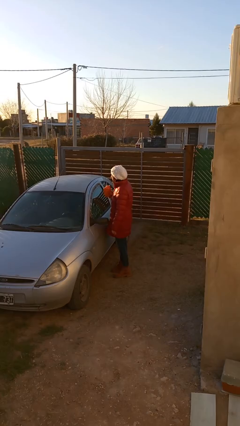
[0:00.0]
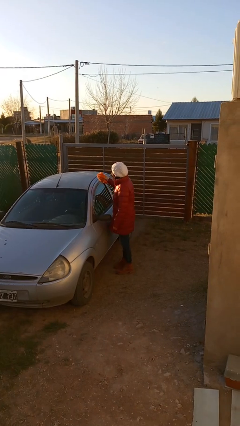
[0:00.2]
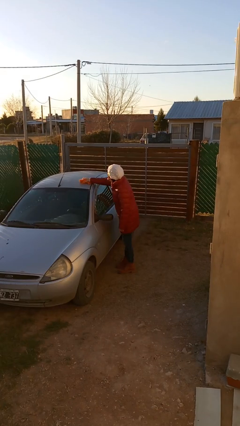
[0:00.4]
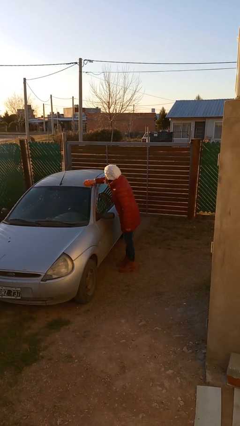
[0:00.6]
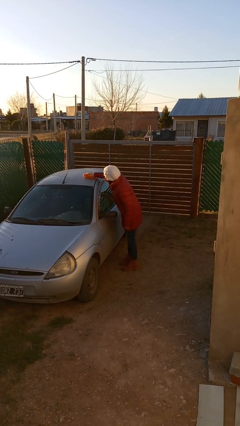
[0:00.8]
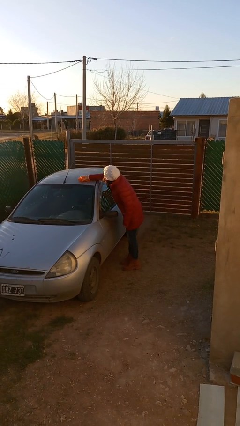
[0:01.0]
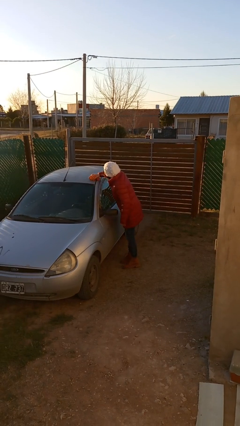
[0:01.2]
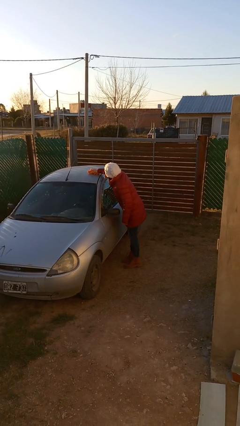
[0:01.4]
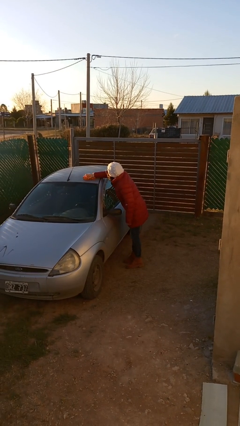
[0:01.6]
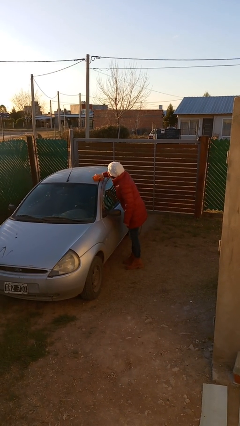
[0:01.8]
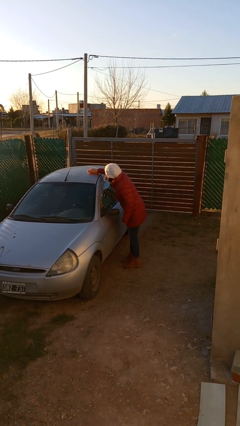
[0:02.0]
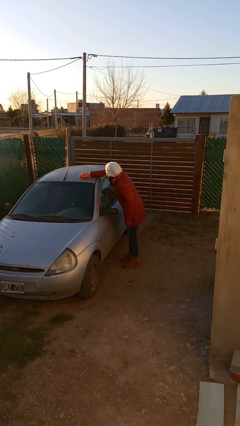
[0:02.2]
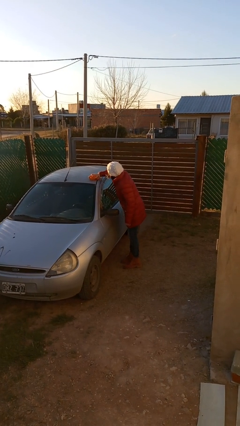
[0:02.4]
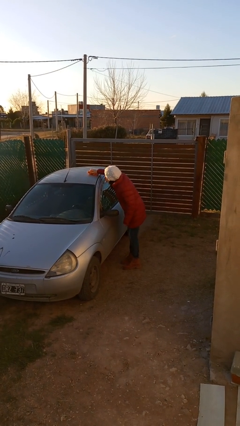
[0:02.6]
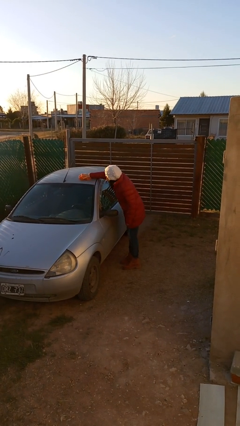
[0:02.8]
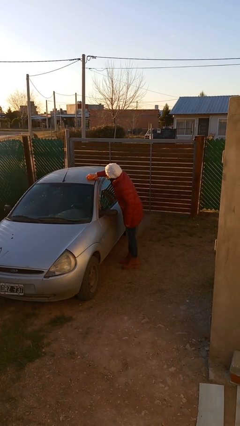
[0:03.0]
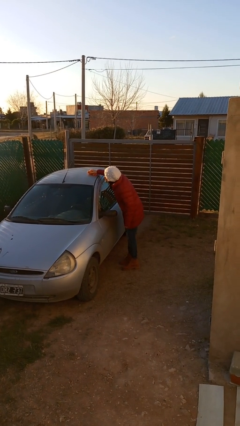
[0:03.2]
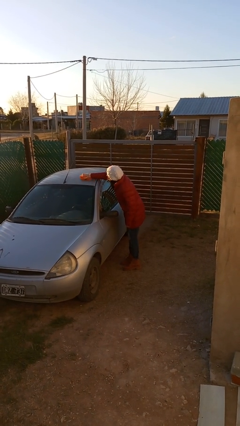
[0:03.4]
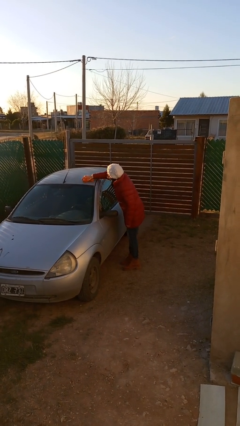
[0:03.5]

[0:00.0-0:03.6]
person polishes car with rag

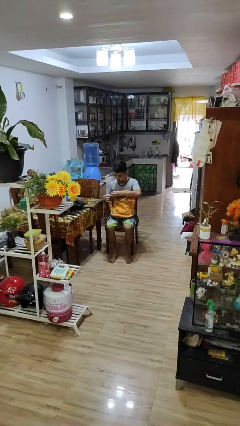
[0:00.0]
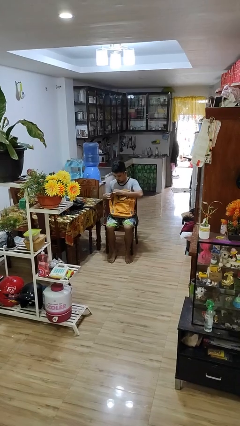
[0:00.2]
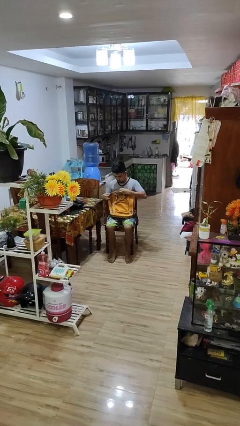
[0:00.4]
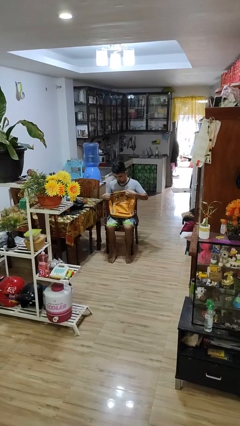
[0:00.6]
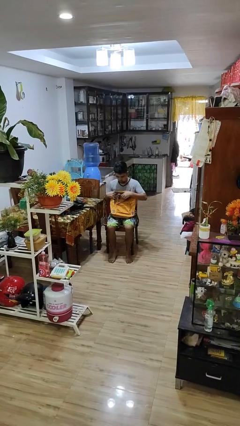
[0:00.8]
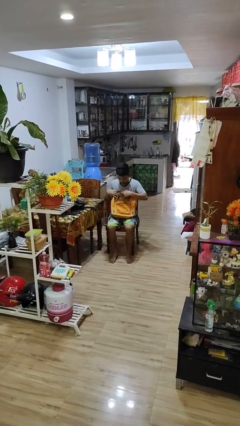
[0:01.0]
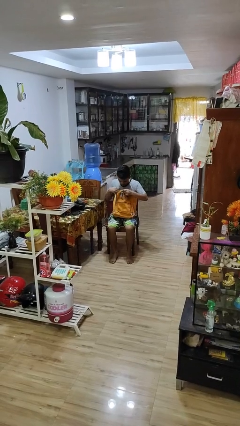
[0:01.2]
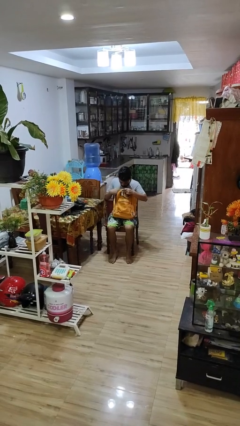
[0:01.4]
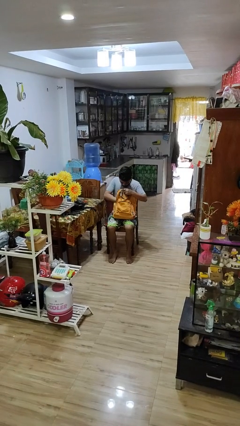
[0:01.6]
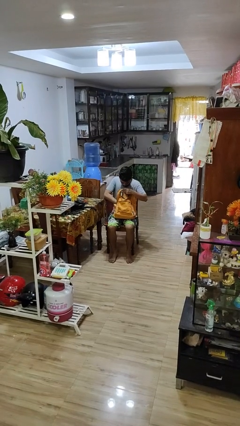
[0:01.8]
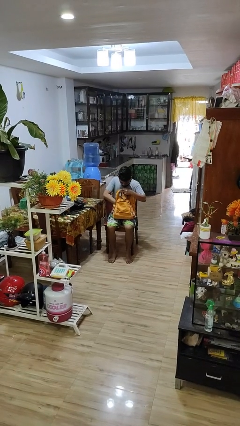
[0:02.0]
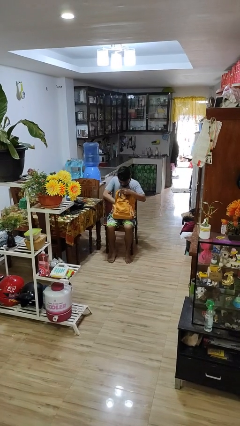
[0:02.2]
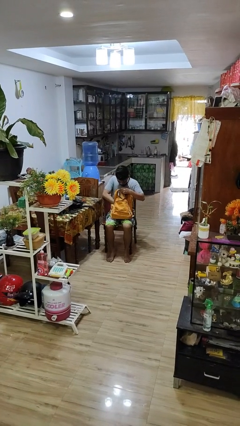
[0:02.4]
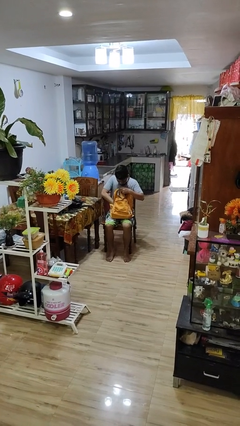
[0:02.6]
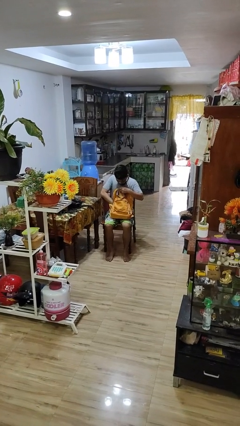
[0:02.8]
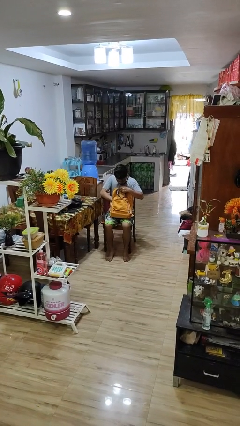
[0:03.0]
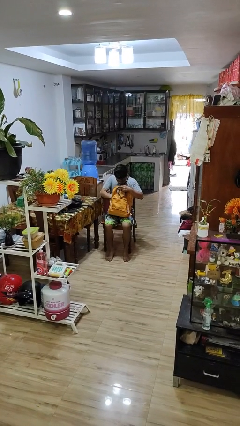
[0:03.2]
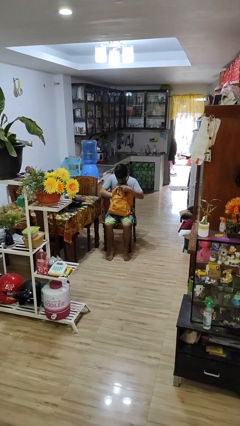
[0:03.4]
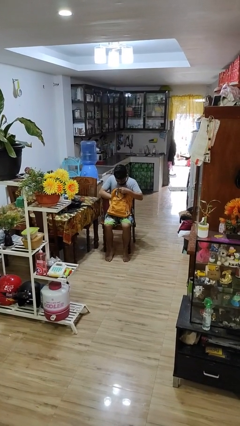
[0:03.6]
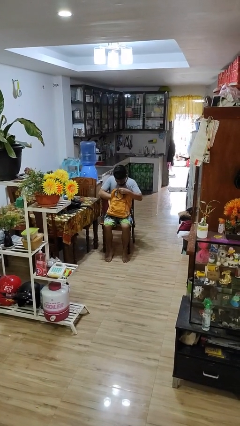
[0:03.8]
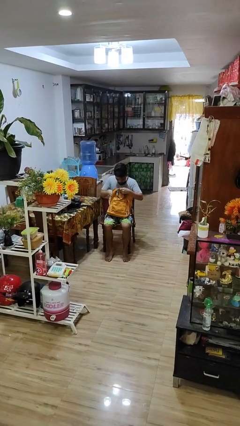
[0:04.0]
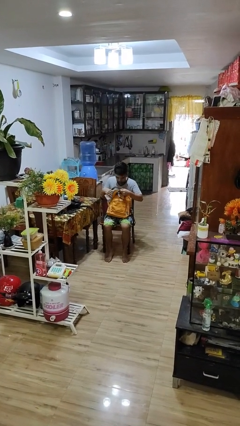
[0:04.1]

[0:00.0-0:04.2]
person searches in backpack

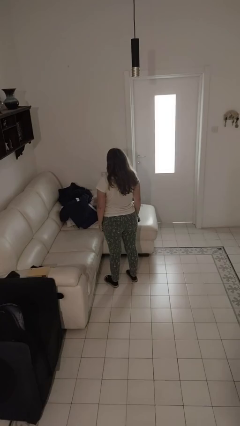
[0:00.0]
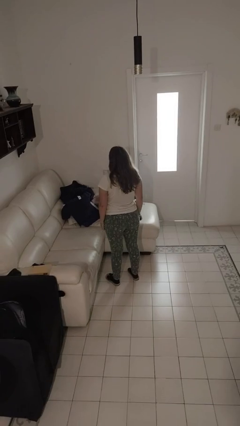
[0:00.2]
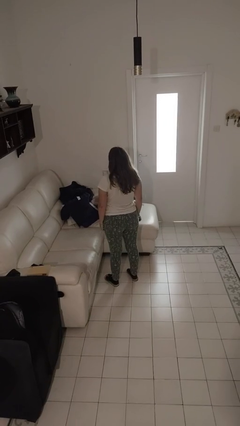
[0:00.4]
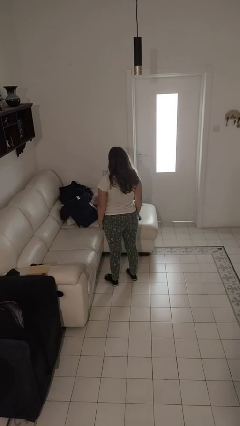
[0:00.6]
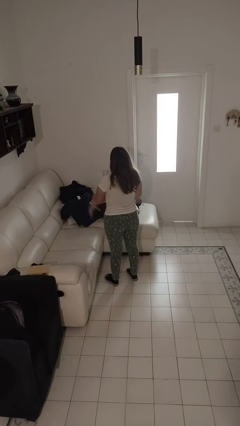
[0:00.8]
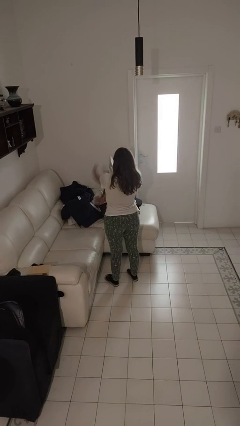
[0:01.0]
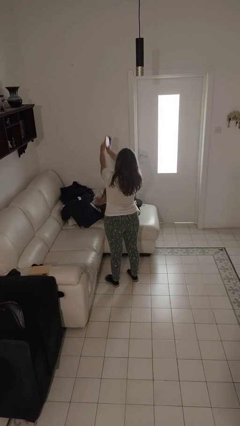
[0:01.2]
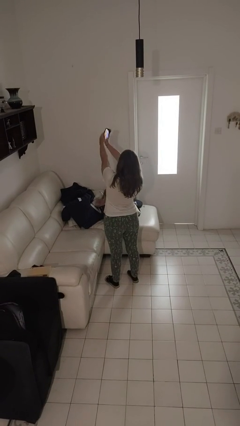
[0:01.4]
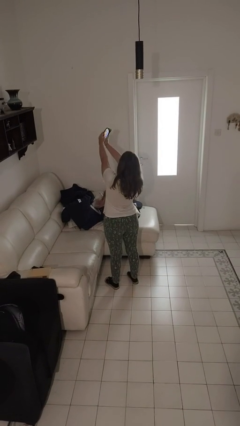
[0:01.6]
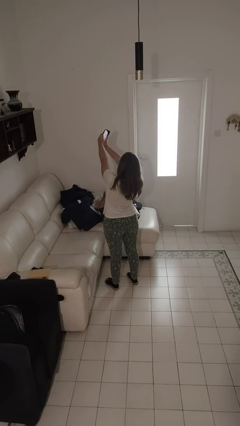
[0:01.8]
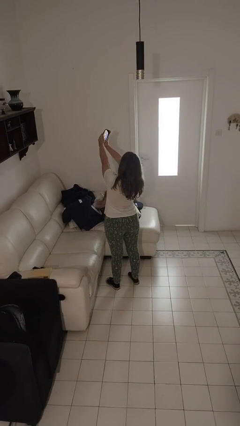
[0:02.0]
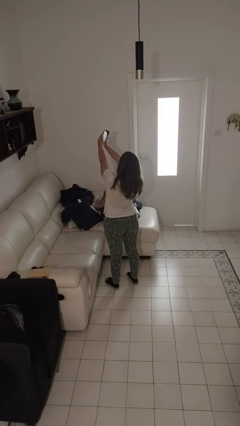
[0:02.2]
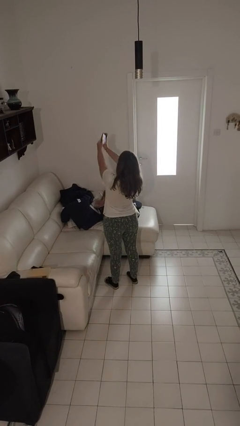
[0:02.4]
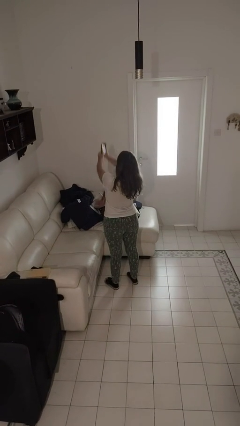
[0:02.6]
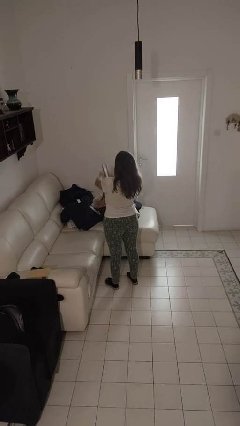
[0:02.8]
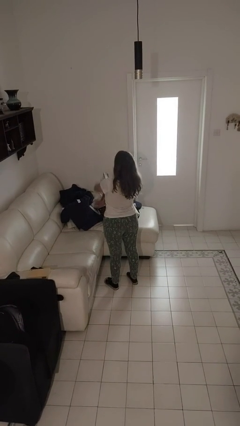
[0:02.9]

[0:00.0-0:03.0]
person takes selfie

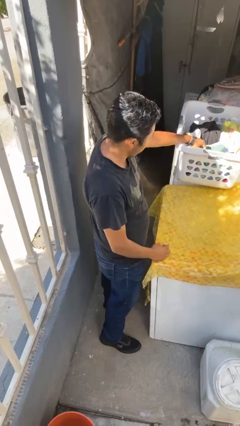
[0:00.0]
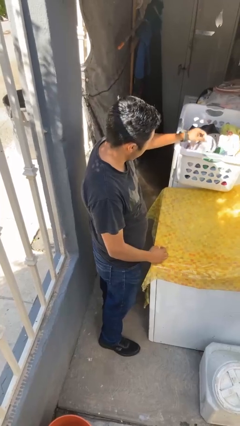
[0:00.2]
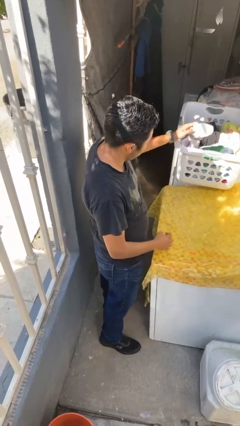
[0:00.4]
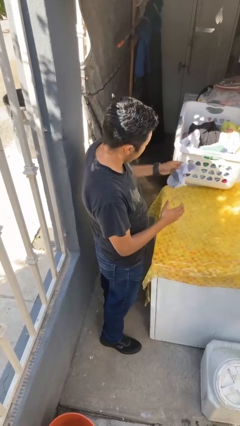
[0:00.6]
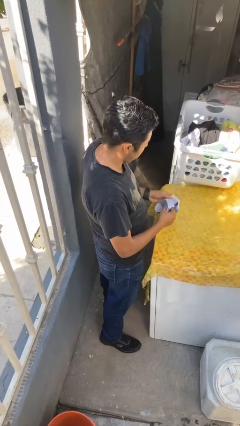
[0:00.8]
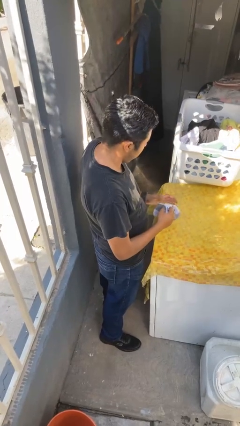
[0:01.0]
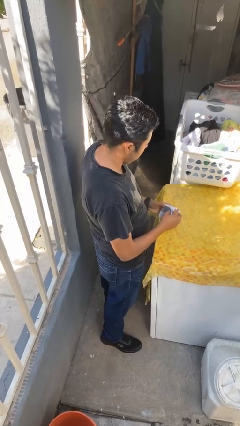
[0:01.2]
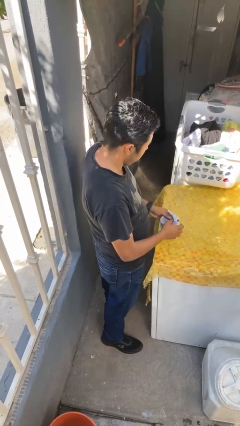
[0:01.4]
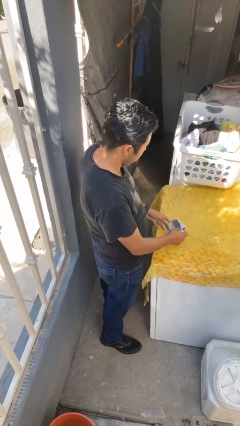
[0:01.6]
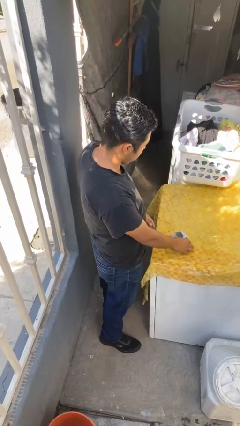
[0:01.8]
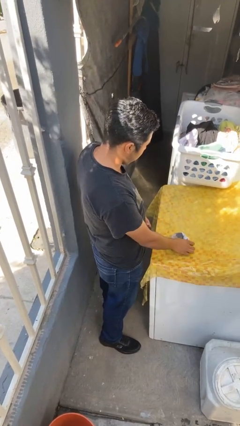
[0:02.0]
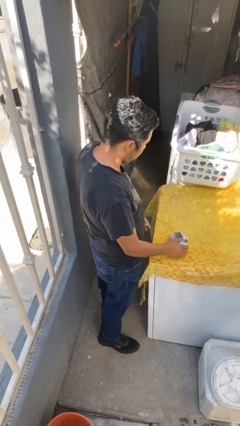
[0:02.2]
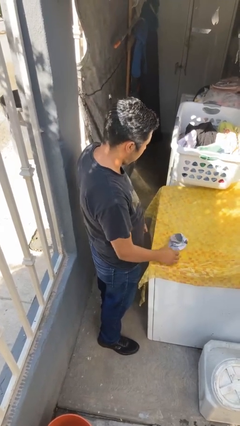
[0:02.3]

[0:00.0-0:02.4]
person folds socks

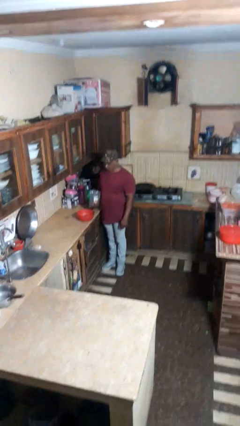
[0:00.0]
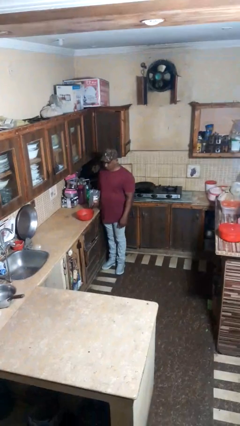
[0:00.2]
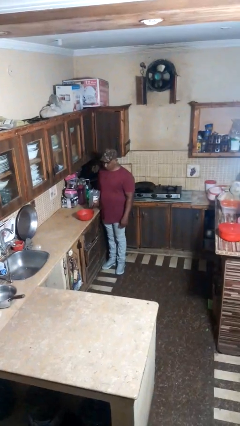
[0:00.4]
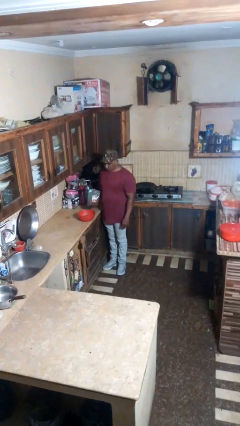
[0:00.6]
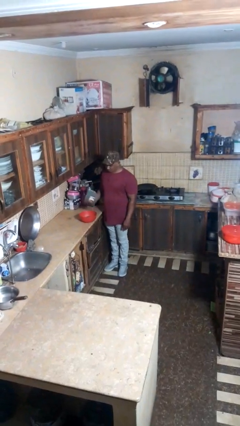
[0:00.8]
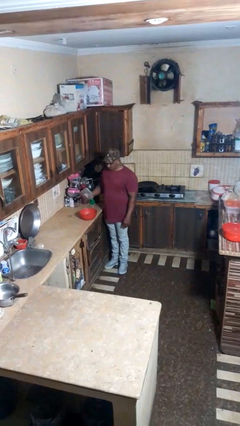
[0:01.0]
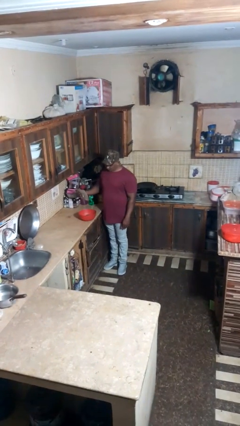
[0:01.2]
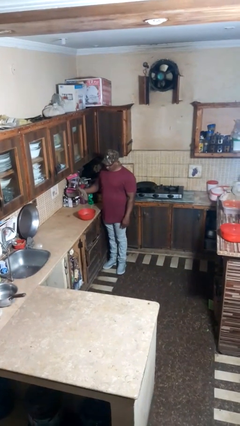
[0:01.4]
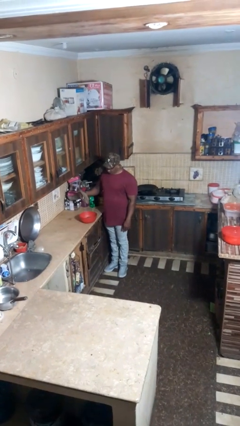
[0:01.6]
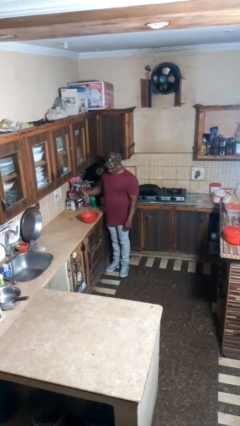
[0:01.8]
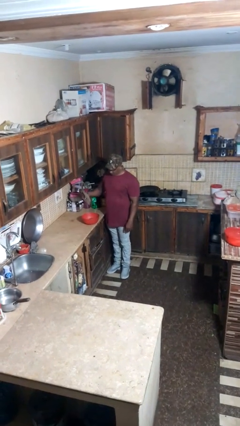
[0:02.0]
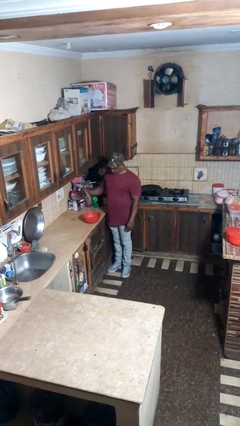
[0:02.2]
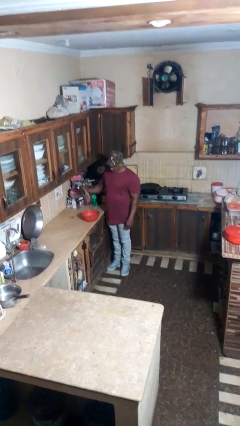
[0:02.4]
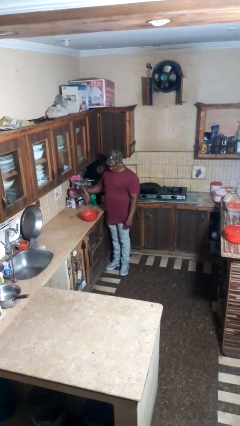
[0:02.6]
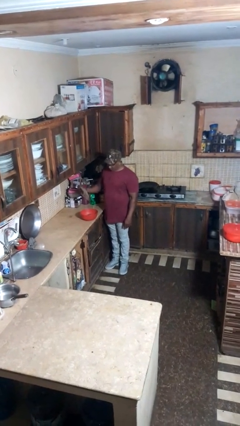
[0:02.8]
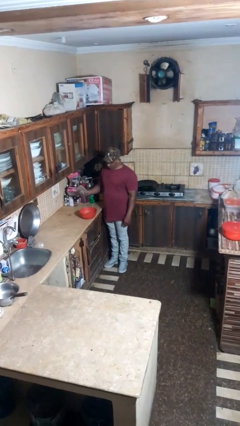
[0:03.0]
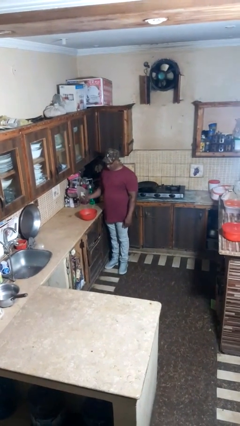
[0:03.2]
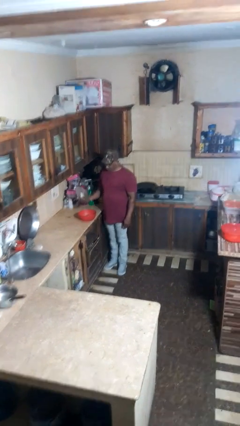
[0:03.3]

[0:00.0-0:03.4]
person pours into bowl

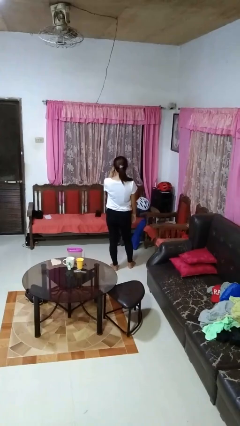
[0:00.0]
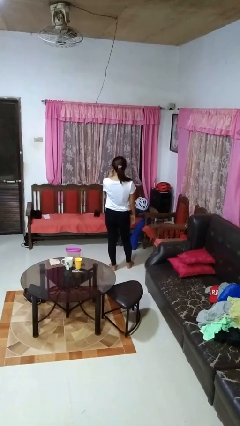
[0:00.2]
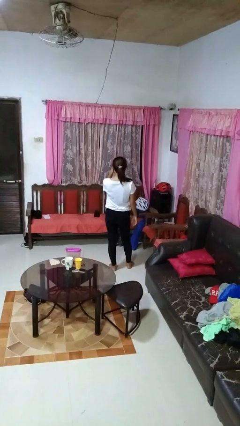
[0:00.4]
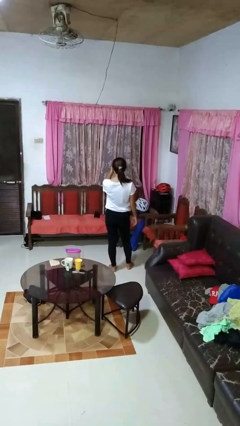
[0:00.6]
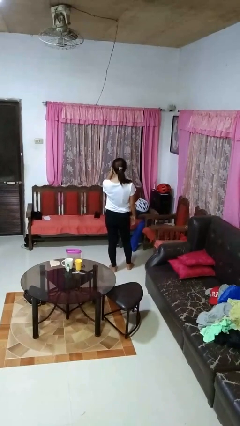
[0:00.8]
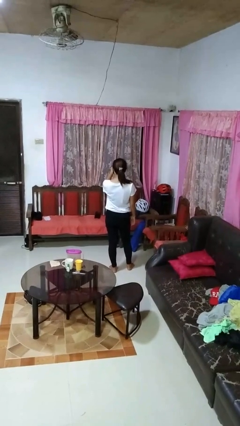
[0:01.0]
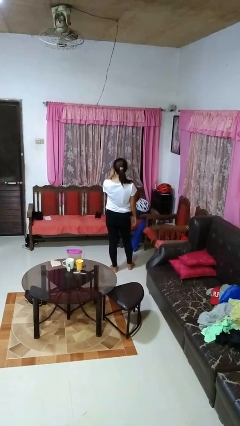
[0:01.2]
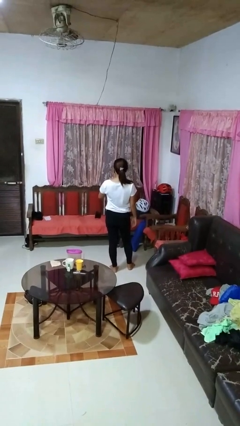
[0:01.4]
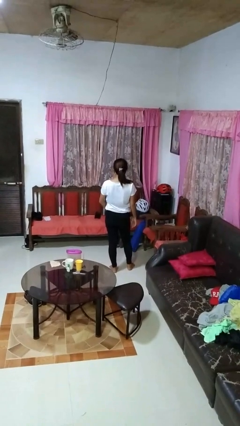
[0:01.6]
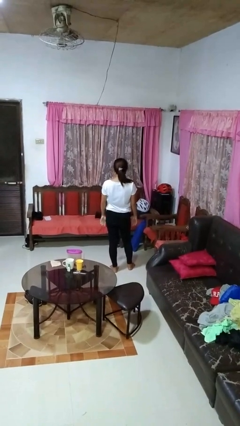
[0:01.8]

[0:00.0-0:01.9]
person gestures watch closely
